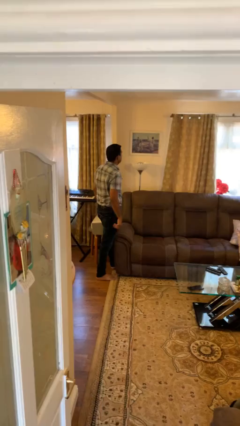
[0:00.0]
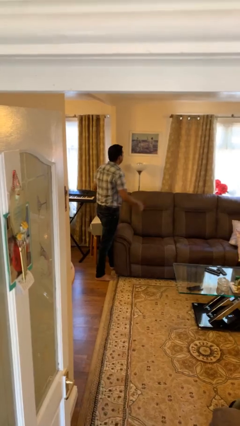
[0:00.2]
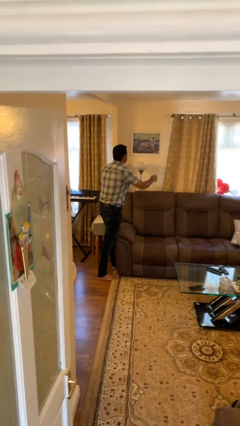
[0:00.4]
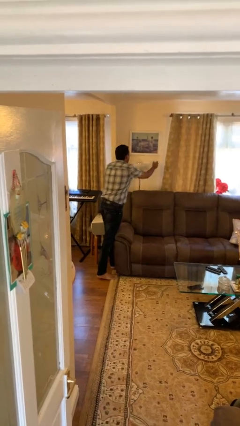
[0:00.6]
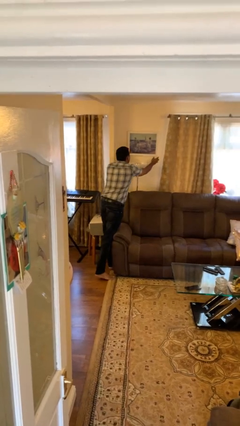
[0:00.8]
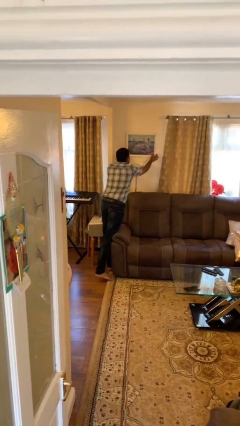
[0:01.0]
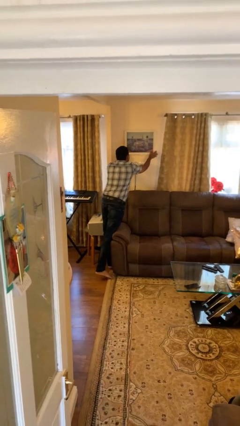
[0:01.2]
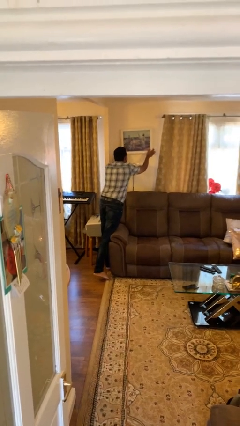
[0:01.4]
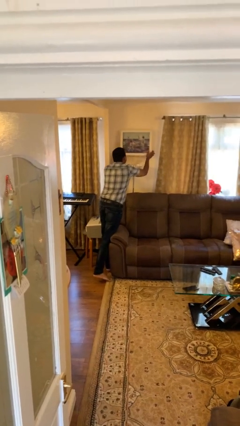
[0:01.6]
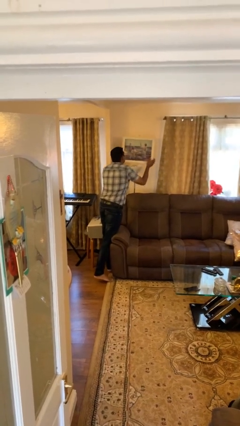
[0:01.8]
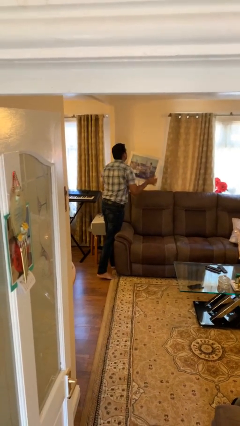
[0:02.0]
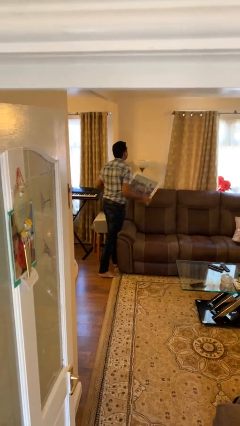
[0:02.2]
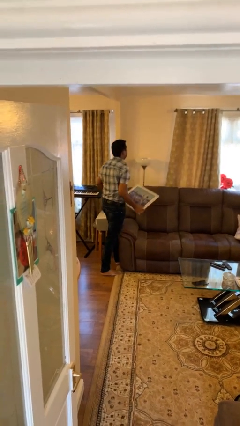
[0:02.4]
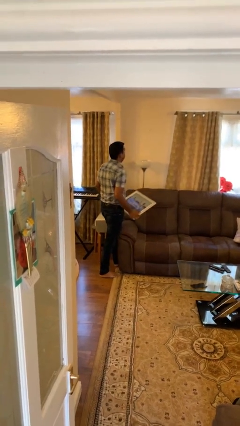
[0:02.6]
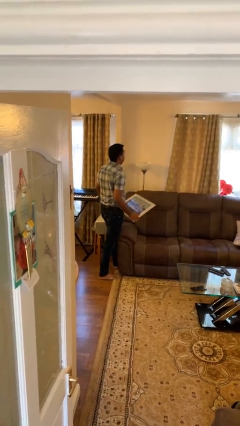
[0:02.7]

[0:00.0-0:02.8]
person takes down picture frame

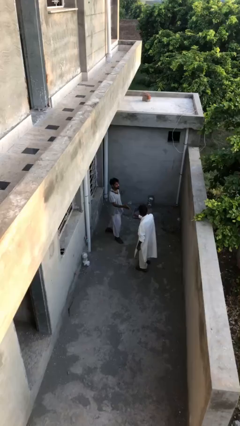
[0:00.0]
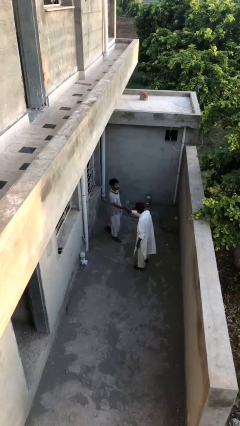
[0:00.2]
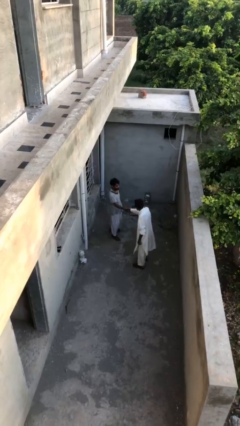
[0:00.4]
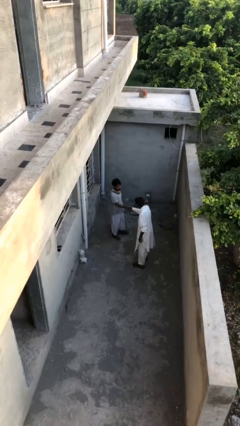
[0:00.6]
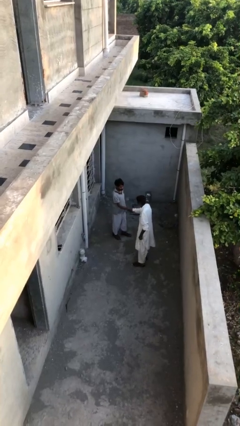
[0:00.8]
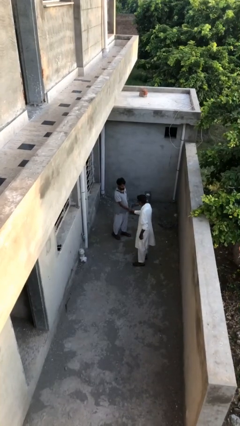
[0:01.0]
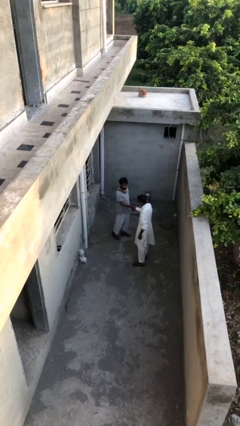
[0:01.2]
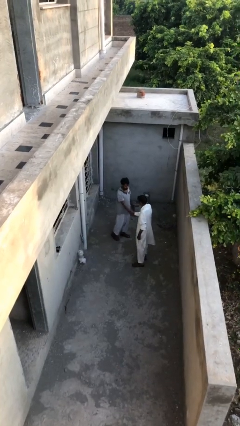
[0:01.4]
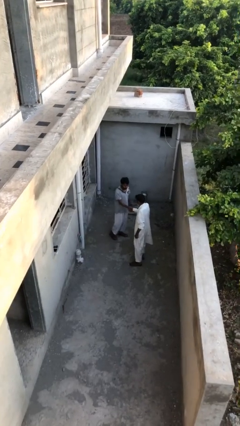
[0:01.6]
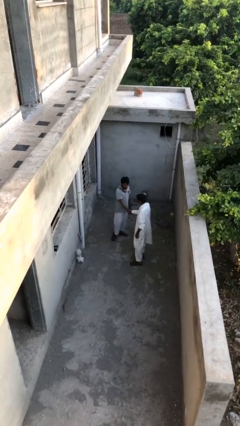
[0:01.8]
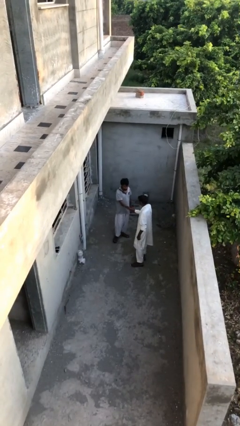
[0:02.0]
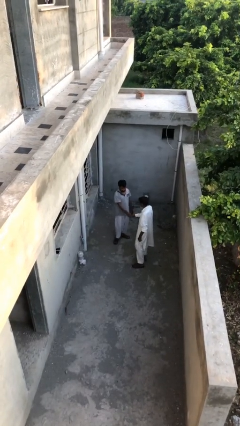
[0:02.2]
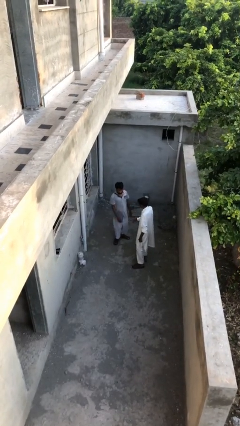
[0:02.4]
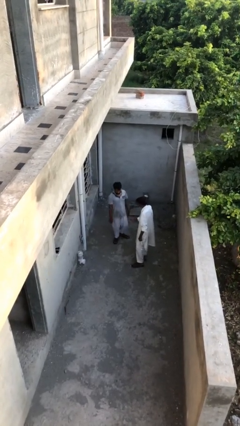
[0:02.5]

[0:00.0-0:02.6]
person shakes hand

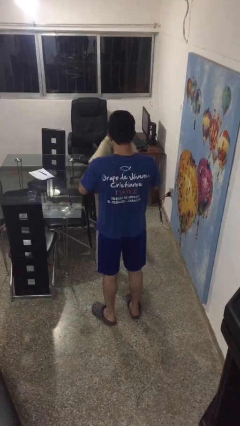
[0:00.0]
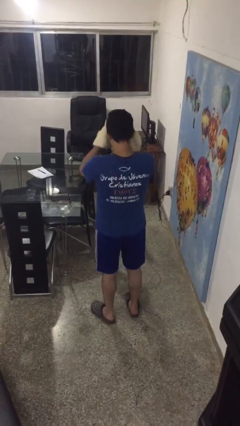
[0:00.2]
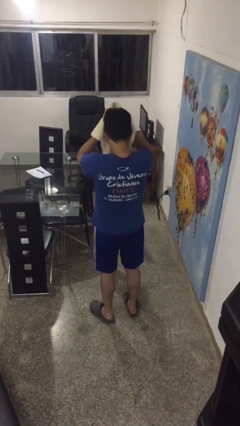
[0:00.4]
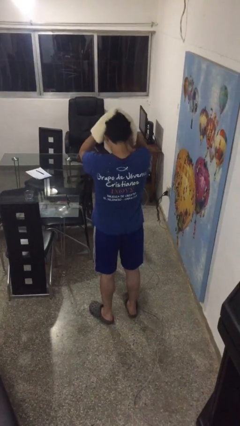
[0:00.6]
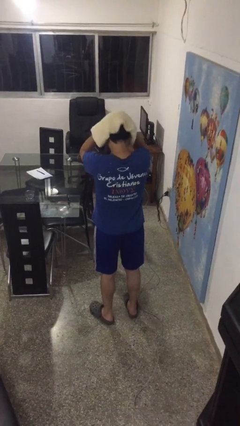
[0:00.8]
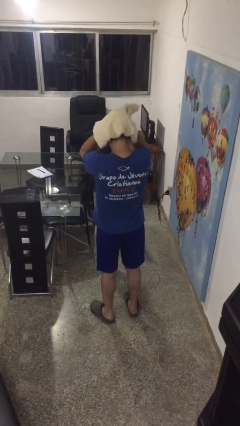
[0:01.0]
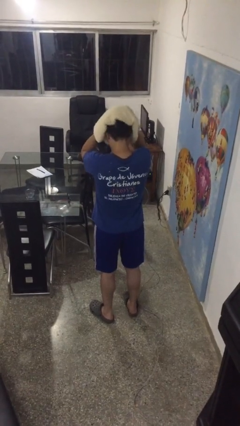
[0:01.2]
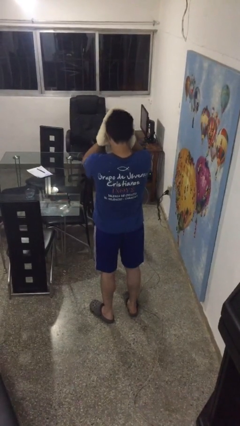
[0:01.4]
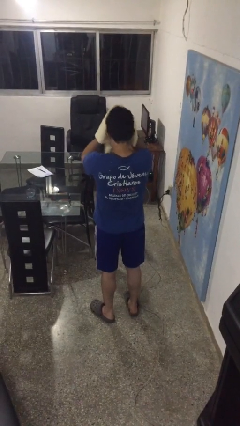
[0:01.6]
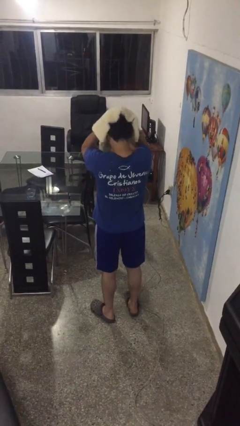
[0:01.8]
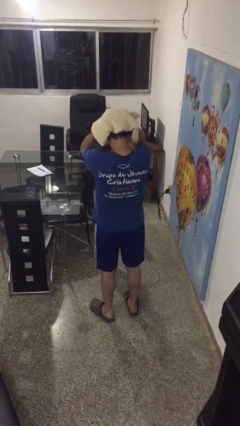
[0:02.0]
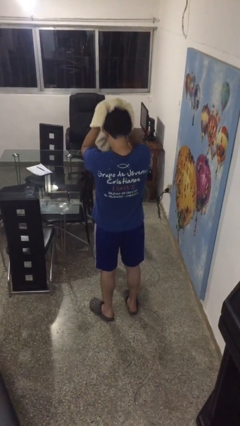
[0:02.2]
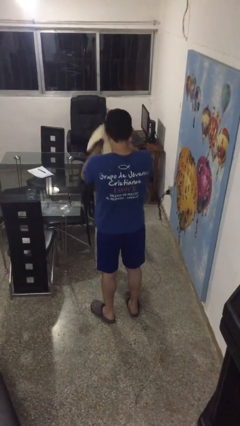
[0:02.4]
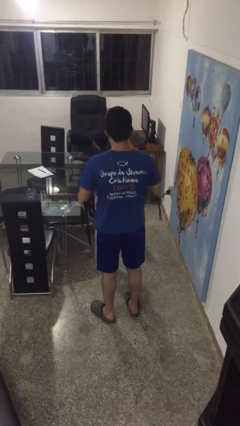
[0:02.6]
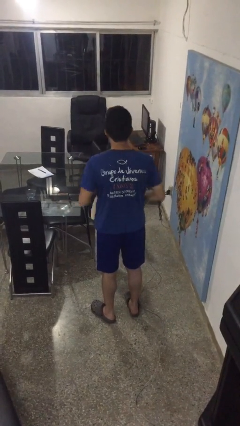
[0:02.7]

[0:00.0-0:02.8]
person dries hair with towel

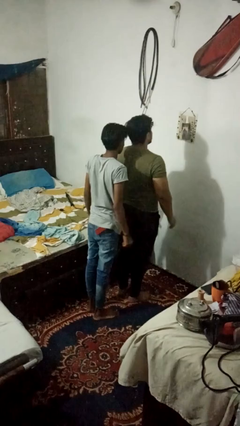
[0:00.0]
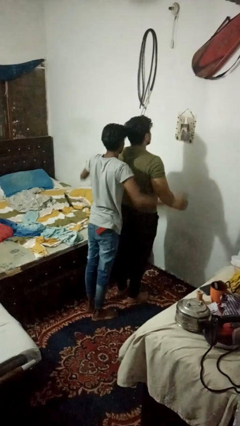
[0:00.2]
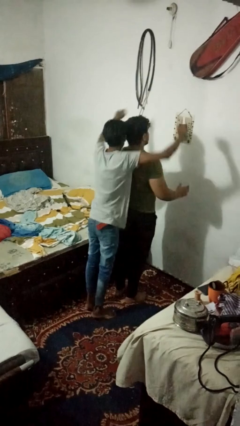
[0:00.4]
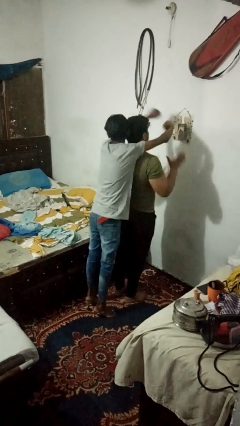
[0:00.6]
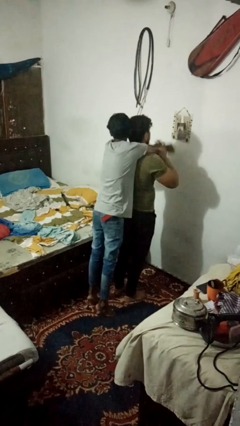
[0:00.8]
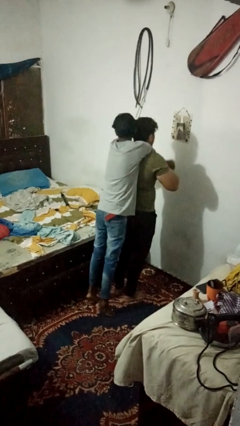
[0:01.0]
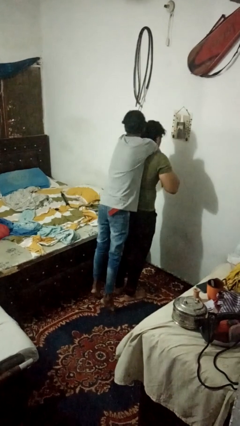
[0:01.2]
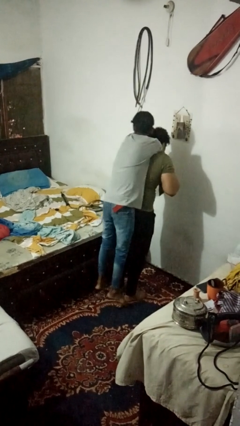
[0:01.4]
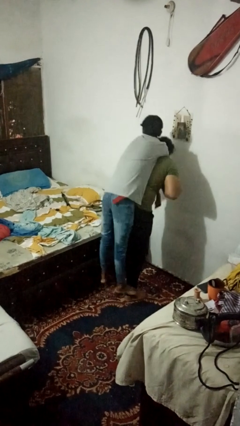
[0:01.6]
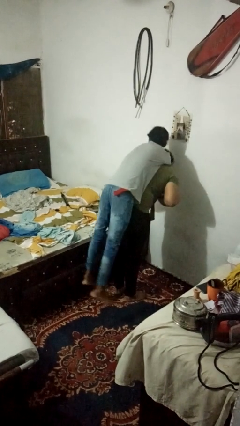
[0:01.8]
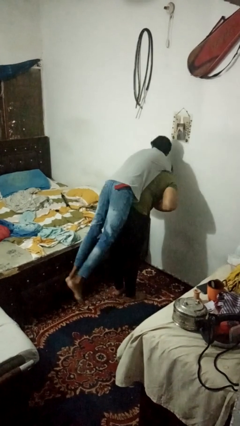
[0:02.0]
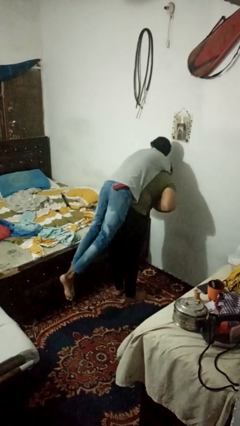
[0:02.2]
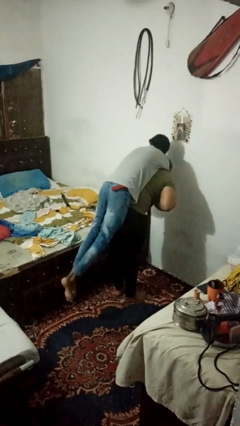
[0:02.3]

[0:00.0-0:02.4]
person carries person on shoulders

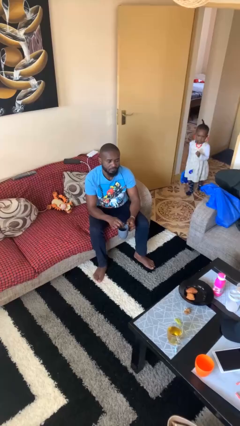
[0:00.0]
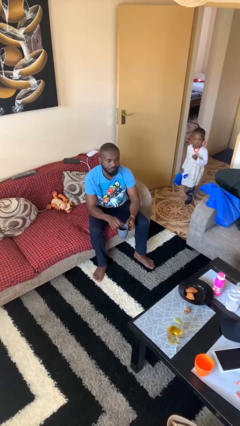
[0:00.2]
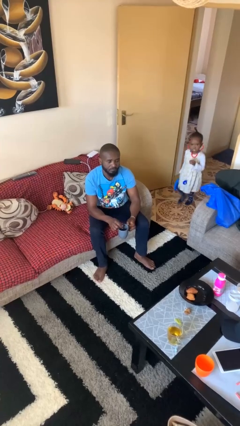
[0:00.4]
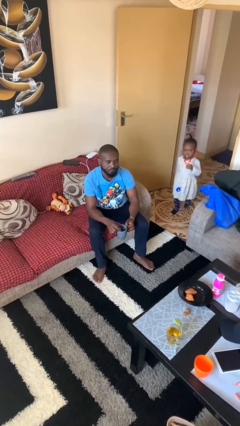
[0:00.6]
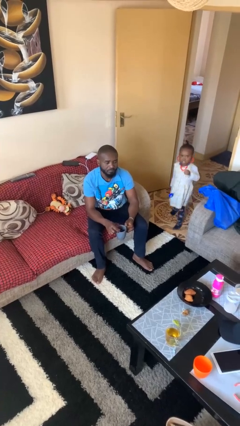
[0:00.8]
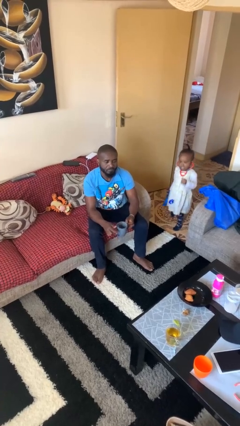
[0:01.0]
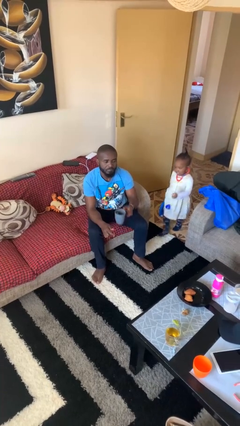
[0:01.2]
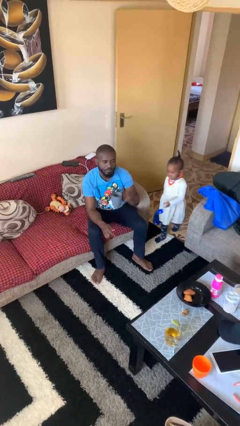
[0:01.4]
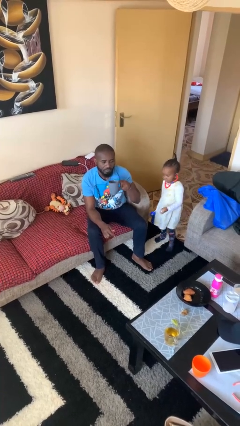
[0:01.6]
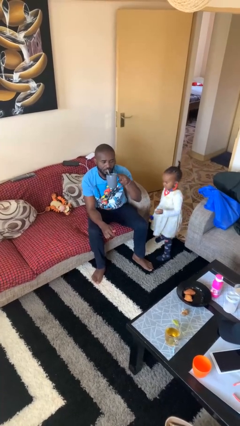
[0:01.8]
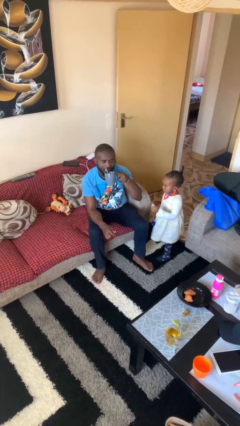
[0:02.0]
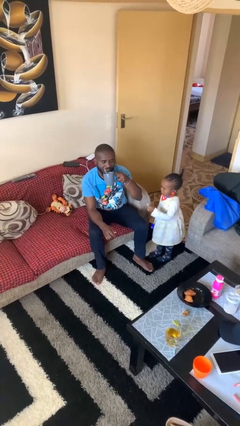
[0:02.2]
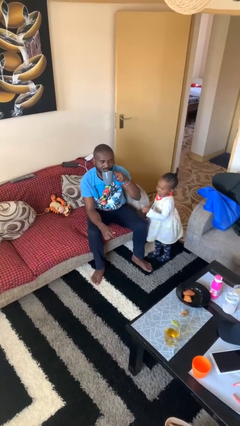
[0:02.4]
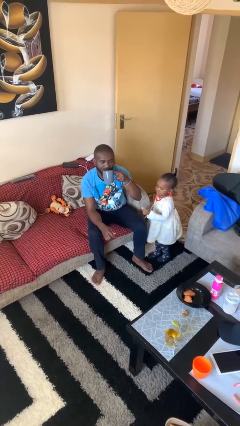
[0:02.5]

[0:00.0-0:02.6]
person drinks from mug

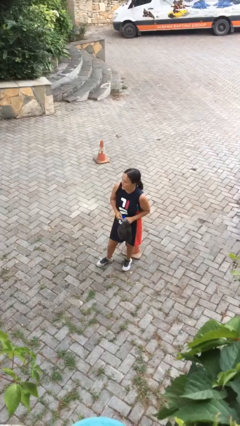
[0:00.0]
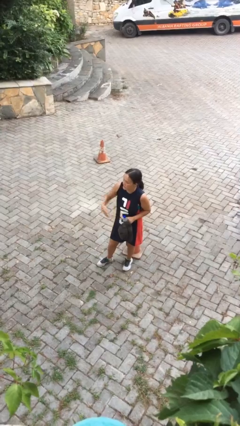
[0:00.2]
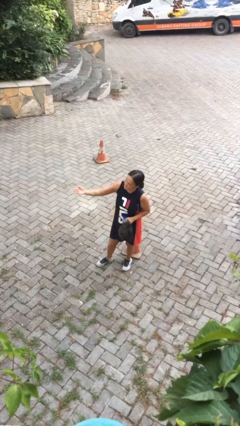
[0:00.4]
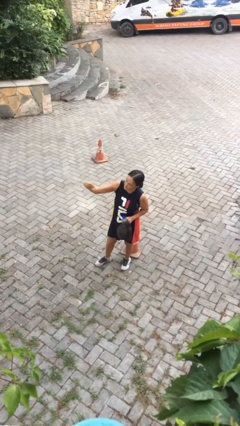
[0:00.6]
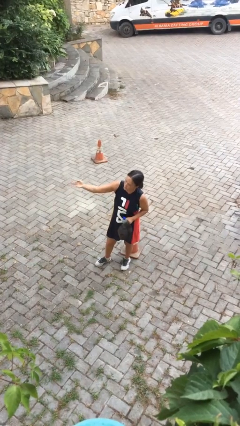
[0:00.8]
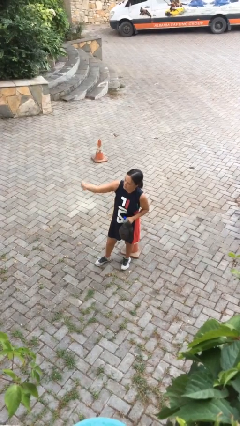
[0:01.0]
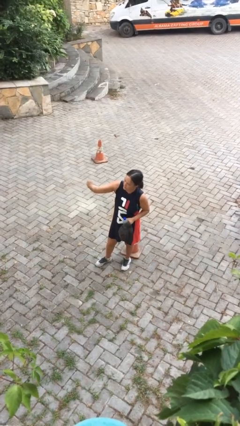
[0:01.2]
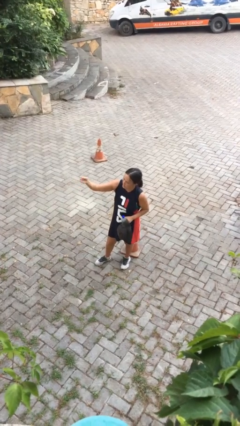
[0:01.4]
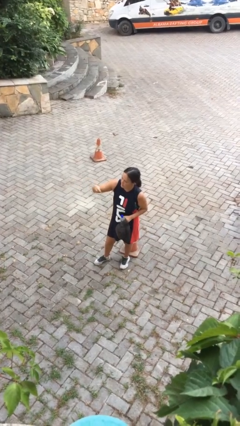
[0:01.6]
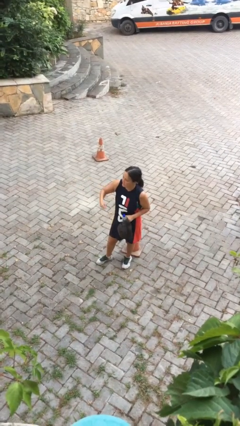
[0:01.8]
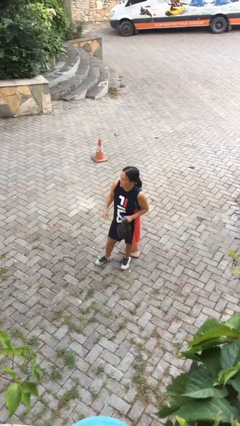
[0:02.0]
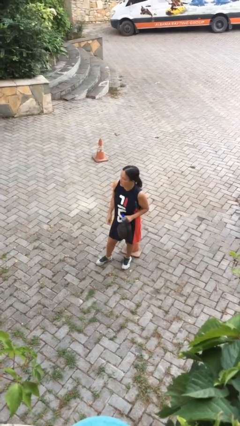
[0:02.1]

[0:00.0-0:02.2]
person gestures come here

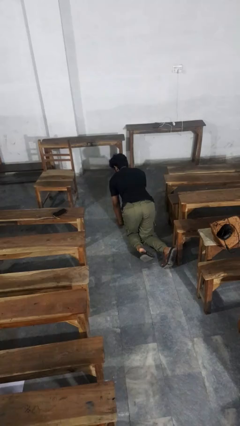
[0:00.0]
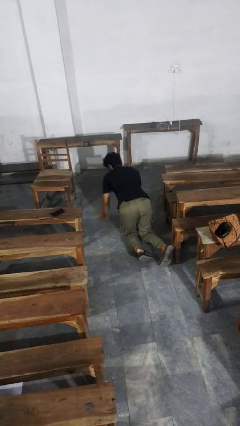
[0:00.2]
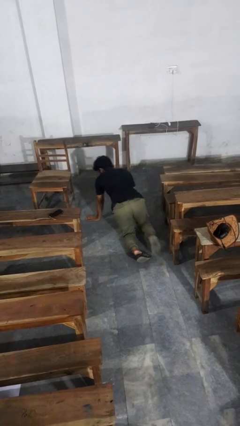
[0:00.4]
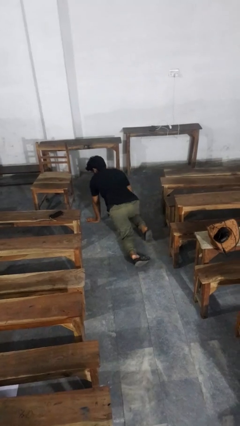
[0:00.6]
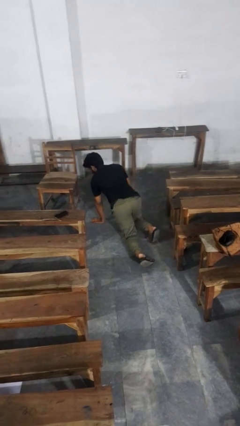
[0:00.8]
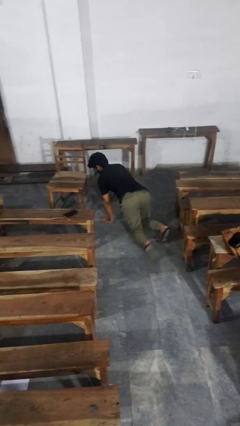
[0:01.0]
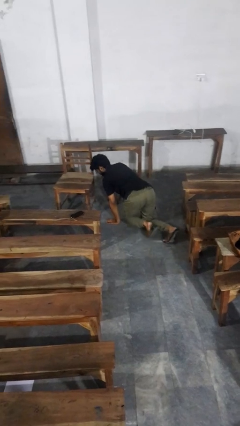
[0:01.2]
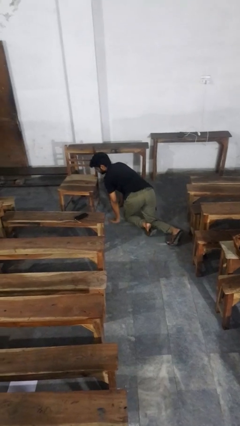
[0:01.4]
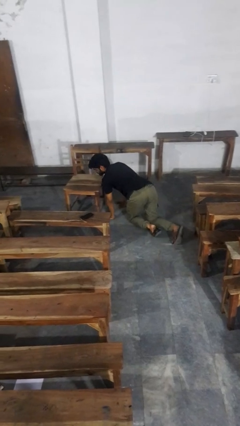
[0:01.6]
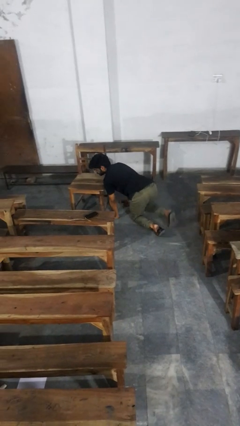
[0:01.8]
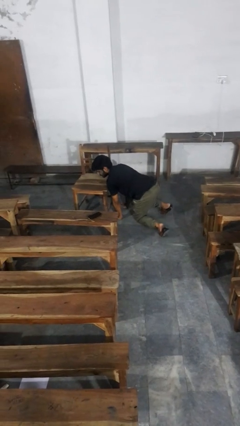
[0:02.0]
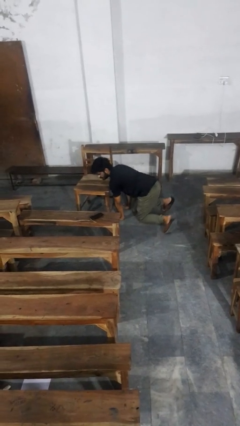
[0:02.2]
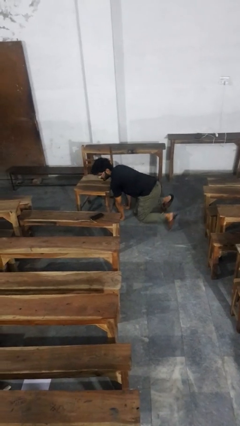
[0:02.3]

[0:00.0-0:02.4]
person crawls
